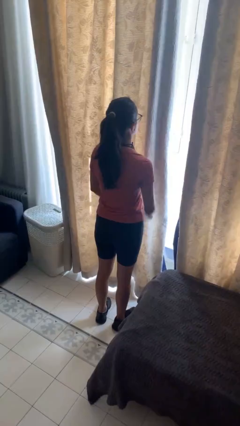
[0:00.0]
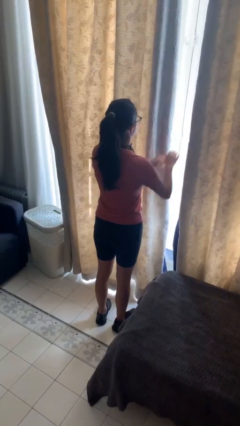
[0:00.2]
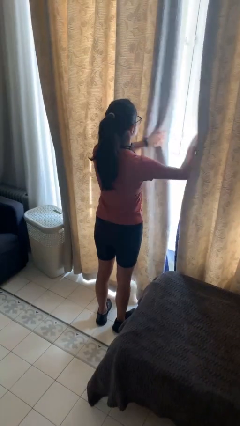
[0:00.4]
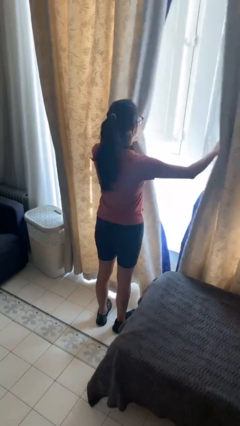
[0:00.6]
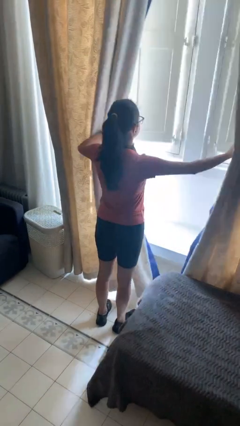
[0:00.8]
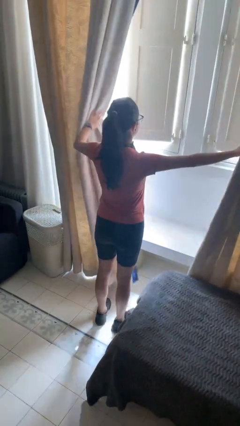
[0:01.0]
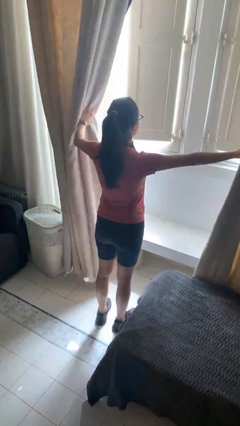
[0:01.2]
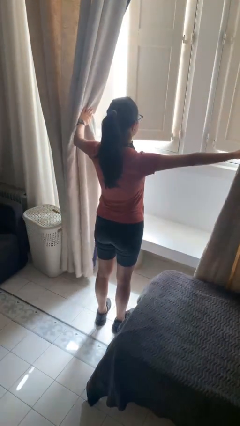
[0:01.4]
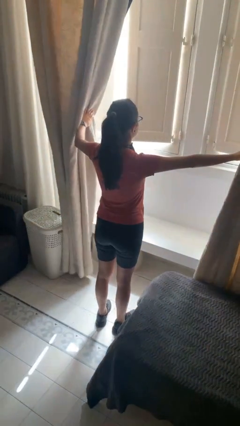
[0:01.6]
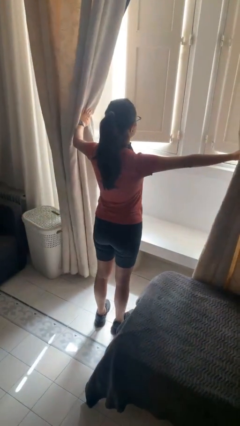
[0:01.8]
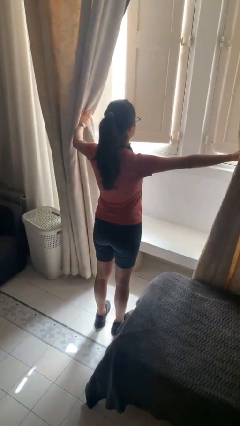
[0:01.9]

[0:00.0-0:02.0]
person opens curtains

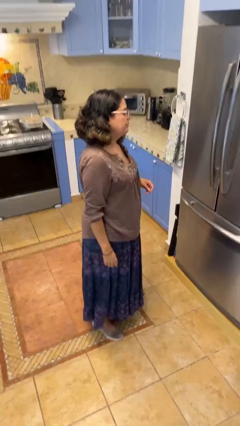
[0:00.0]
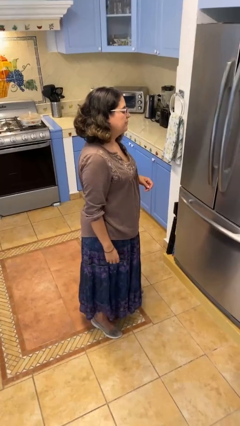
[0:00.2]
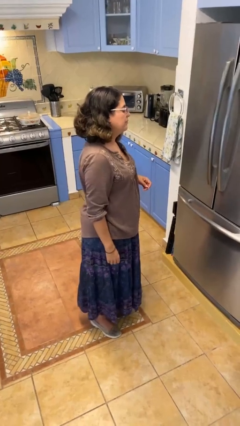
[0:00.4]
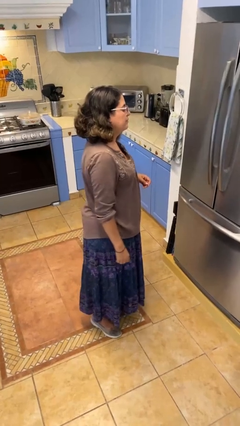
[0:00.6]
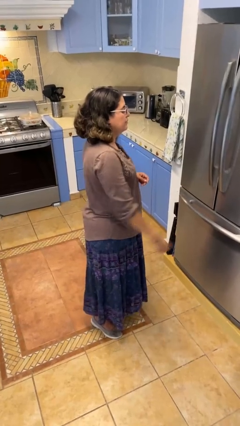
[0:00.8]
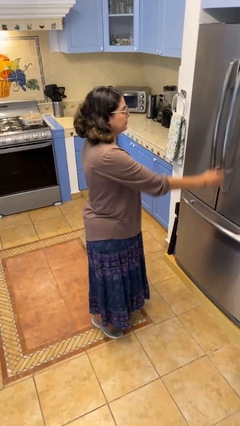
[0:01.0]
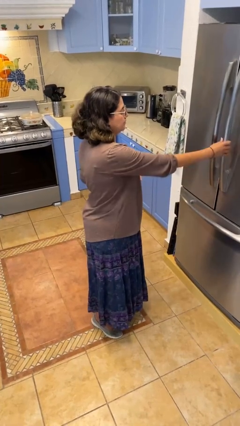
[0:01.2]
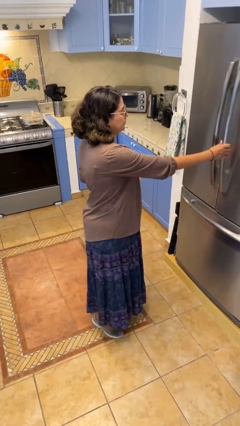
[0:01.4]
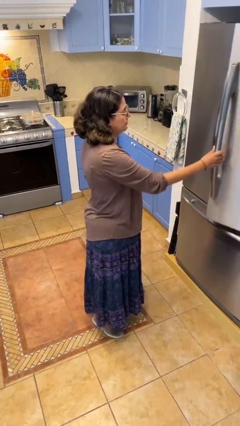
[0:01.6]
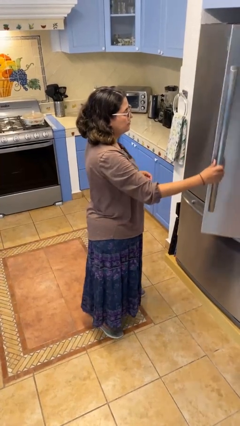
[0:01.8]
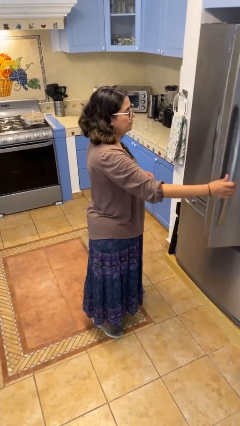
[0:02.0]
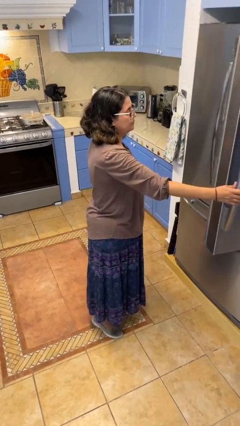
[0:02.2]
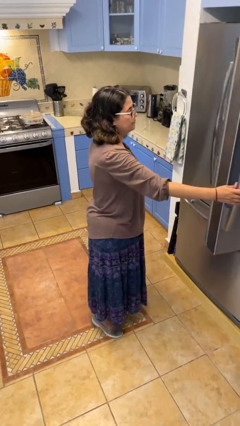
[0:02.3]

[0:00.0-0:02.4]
person opens refrigerator

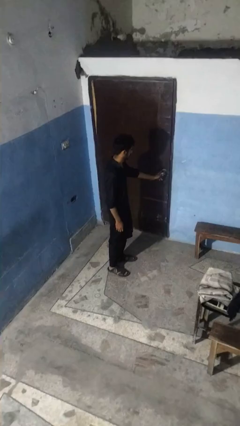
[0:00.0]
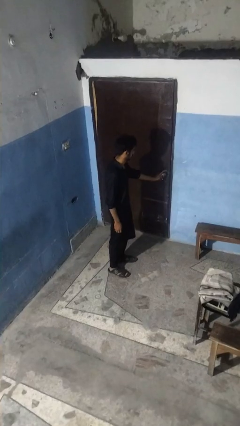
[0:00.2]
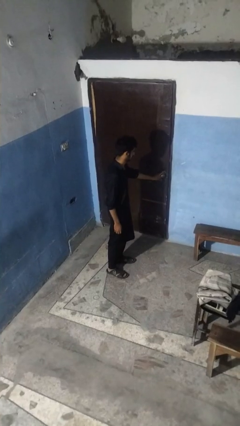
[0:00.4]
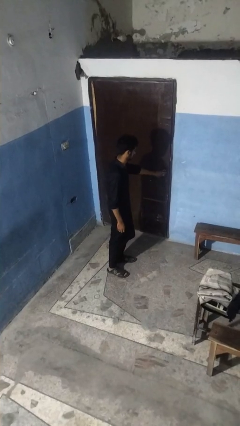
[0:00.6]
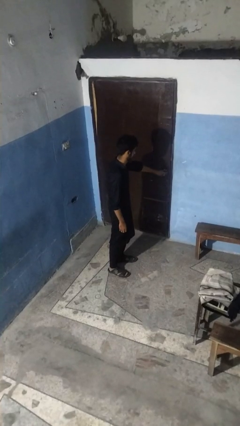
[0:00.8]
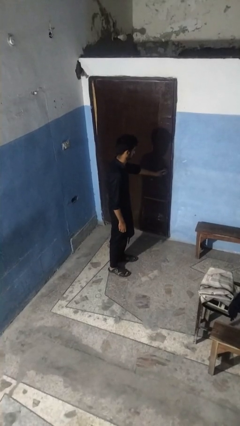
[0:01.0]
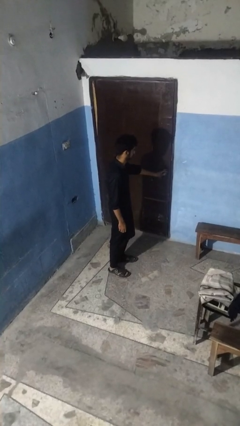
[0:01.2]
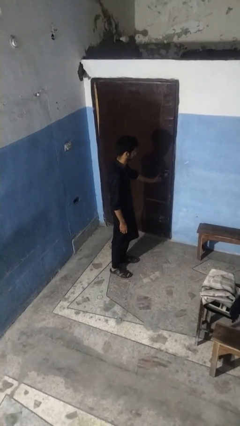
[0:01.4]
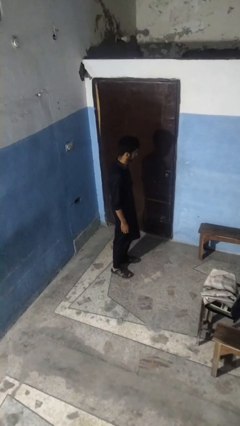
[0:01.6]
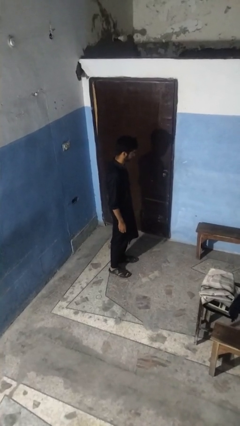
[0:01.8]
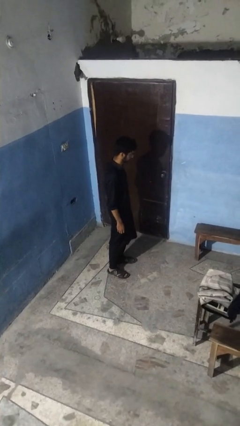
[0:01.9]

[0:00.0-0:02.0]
person locks door with keys

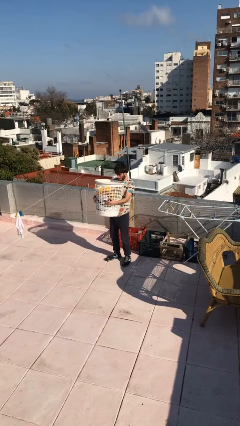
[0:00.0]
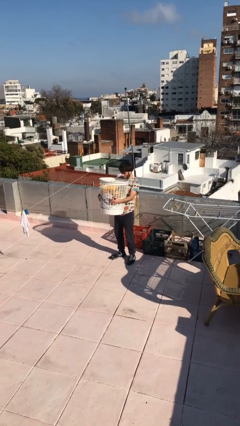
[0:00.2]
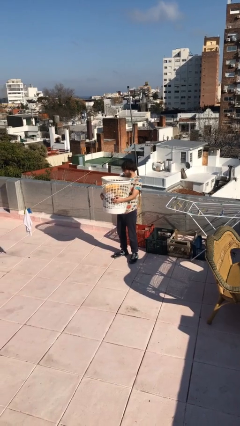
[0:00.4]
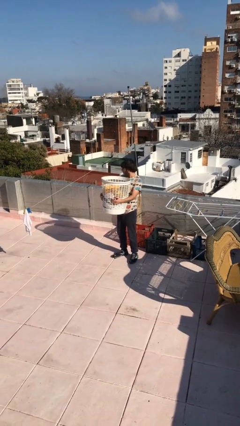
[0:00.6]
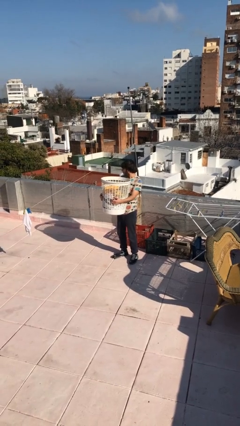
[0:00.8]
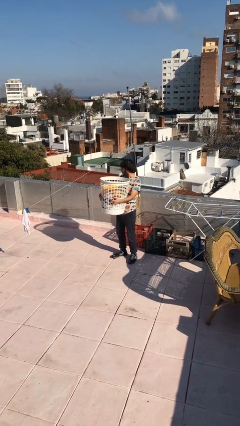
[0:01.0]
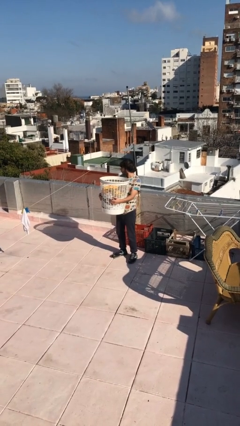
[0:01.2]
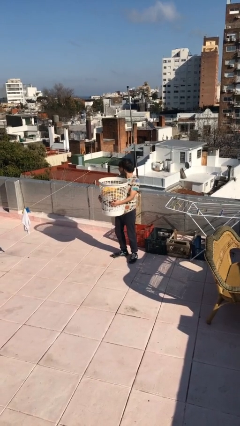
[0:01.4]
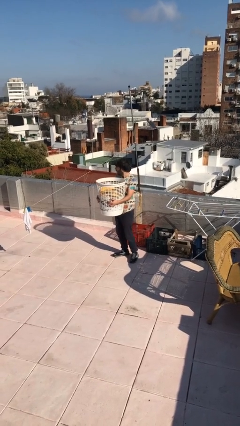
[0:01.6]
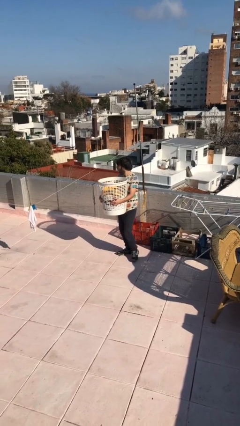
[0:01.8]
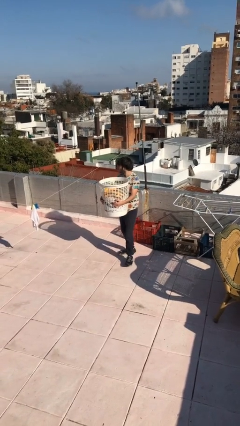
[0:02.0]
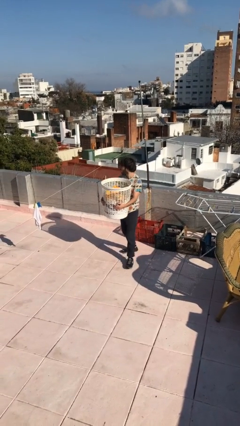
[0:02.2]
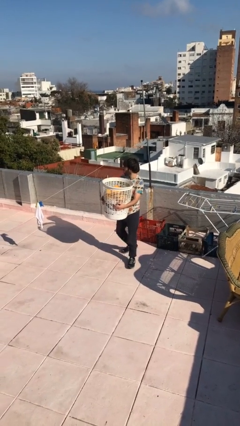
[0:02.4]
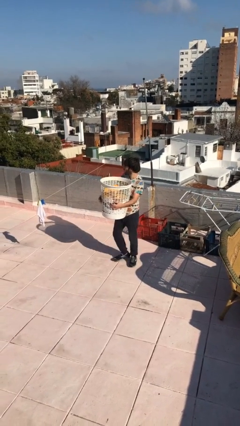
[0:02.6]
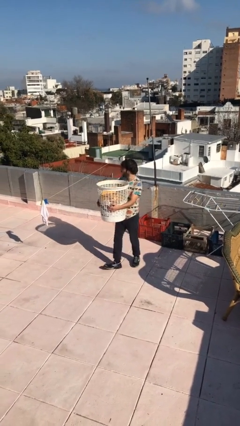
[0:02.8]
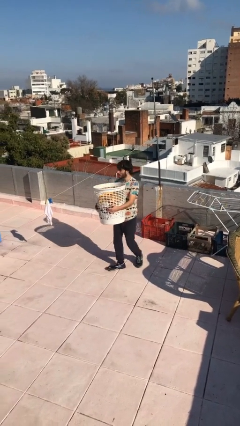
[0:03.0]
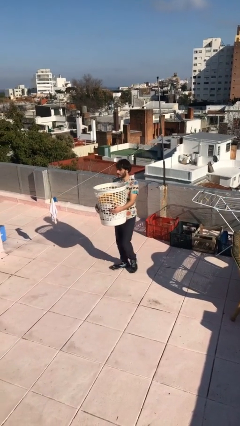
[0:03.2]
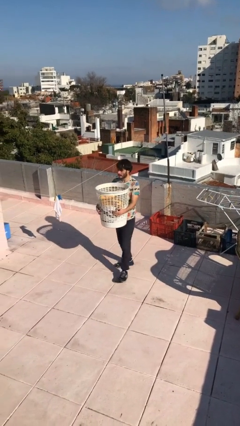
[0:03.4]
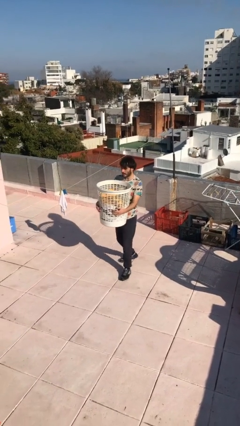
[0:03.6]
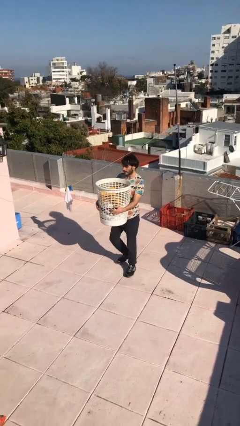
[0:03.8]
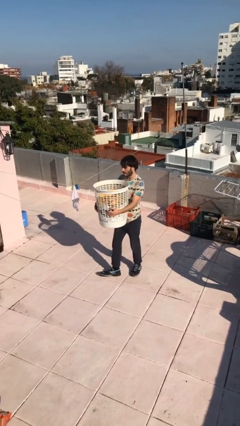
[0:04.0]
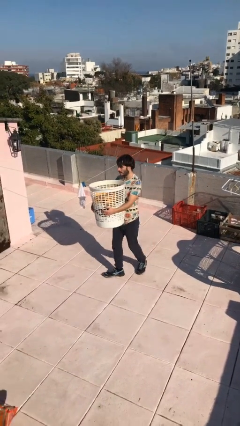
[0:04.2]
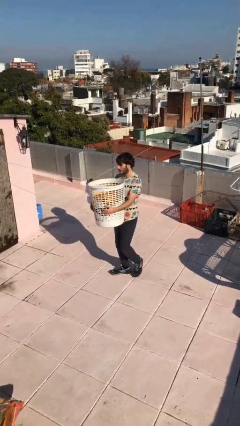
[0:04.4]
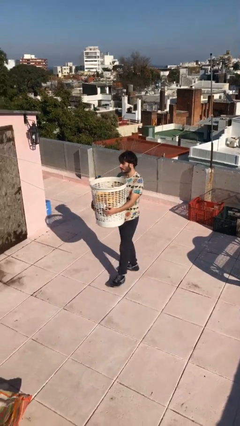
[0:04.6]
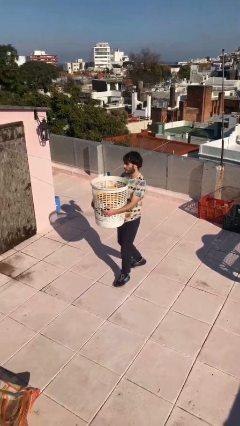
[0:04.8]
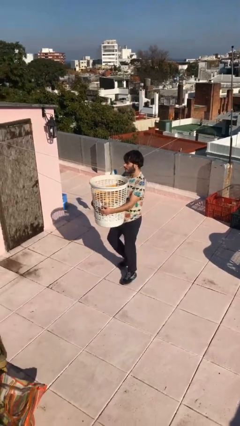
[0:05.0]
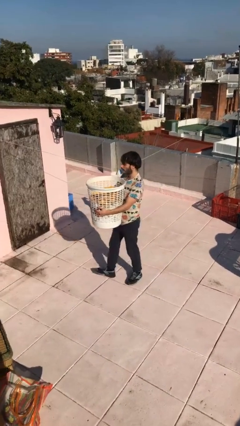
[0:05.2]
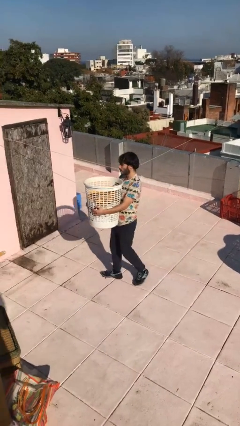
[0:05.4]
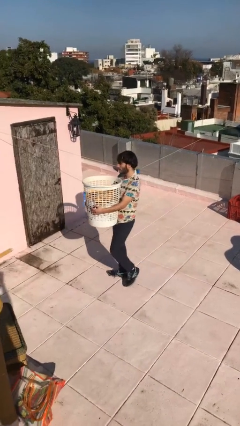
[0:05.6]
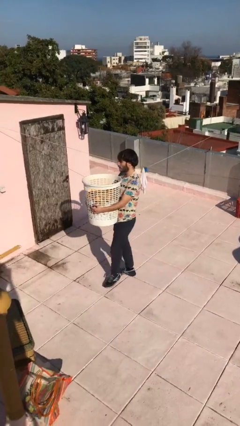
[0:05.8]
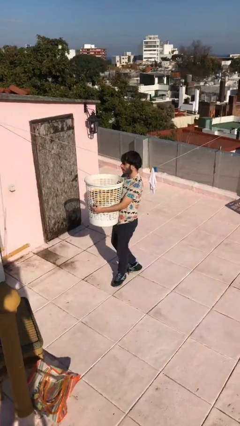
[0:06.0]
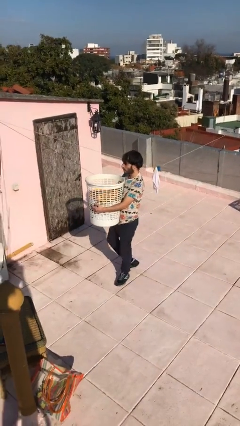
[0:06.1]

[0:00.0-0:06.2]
person carries laundry basket

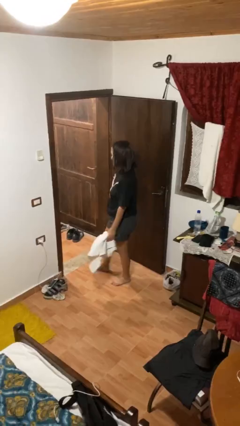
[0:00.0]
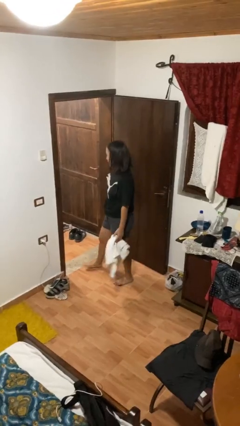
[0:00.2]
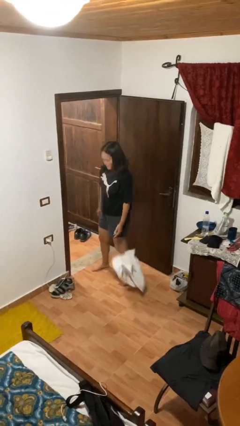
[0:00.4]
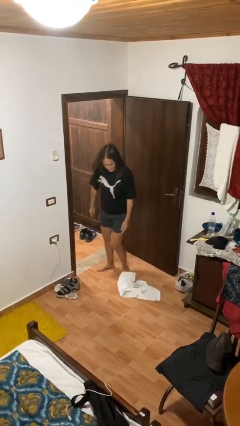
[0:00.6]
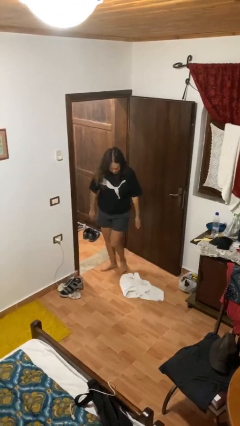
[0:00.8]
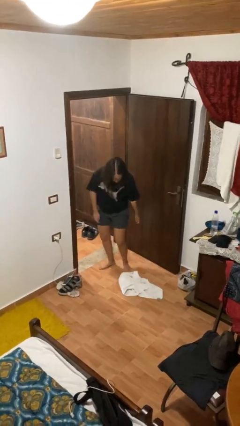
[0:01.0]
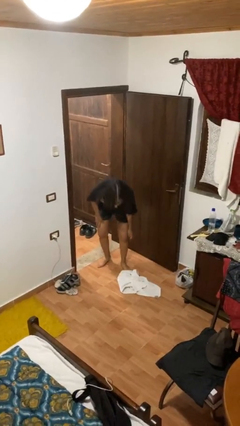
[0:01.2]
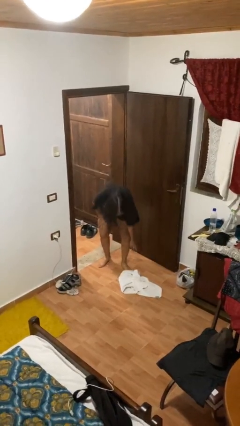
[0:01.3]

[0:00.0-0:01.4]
person drops object

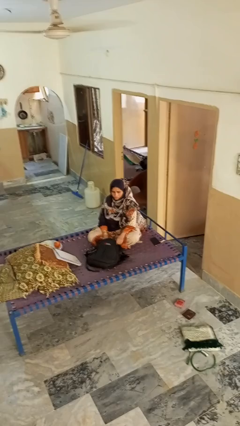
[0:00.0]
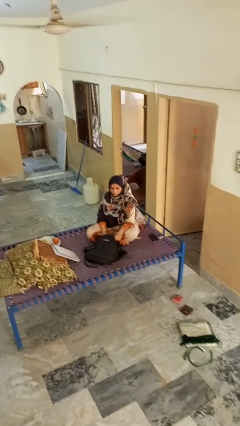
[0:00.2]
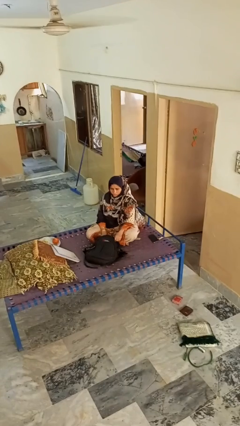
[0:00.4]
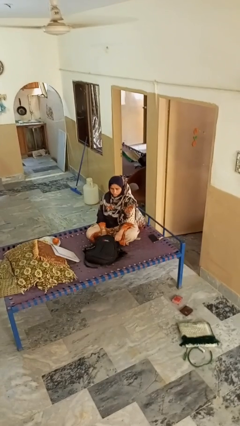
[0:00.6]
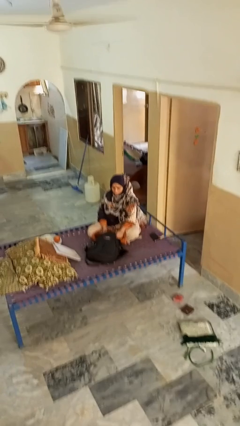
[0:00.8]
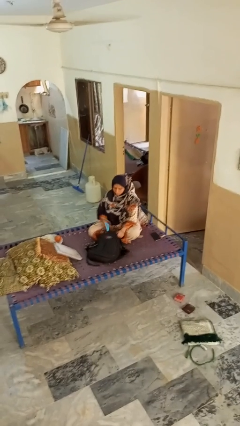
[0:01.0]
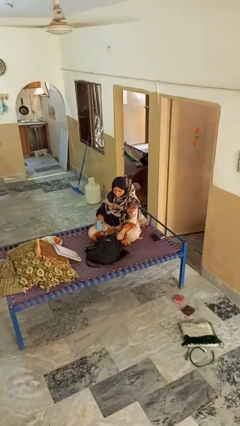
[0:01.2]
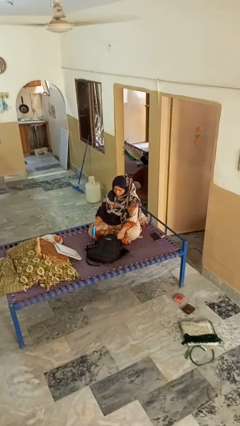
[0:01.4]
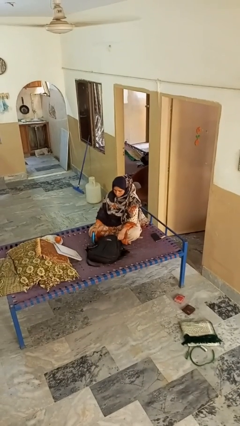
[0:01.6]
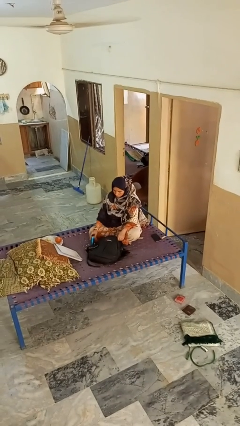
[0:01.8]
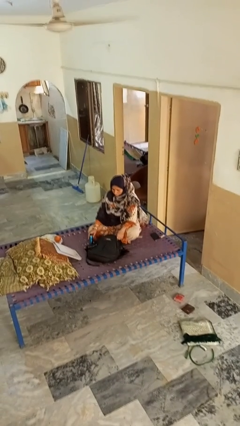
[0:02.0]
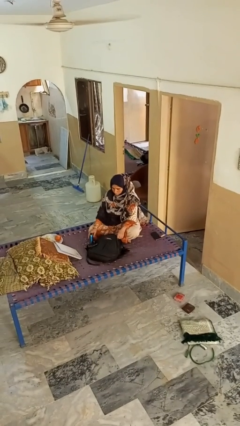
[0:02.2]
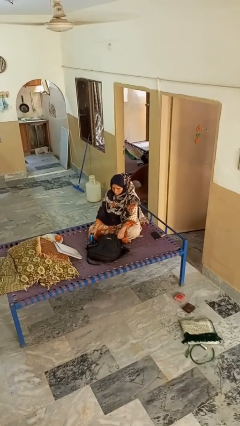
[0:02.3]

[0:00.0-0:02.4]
person takes object from bag

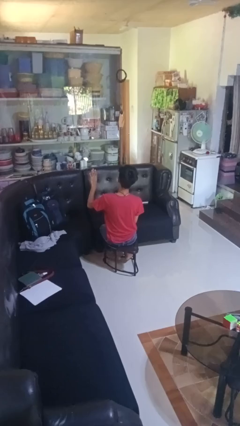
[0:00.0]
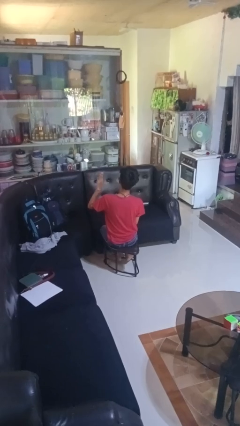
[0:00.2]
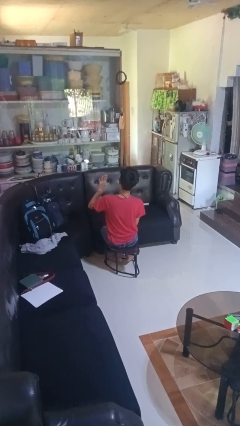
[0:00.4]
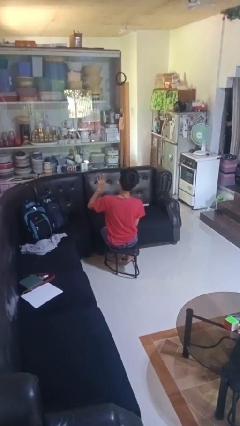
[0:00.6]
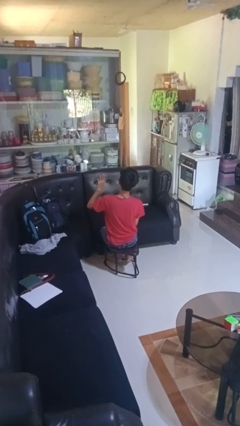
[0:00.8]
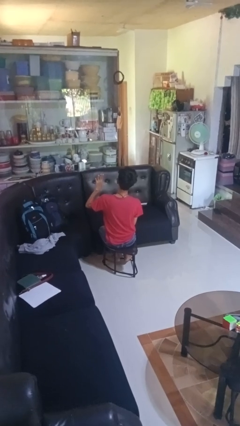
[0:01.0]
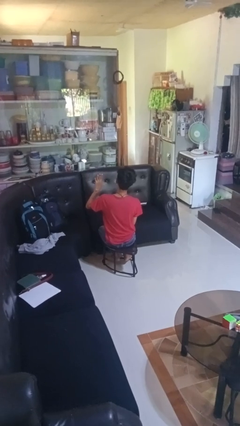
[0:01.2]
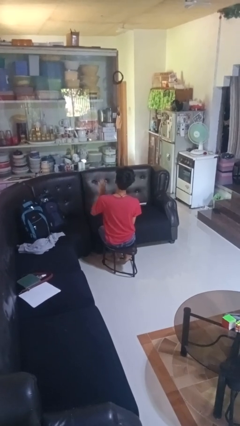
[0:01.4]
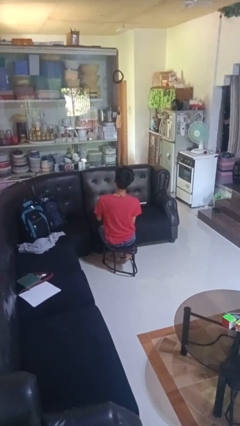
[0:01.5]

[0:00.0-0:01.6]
person gestures number four
